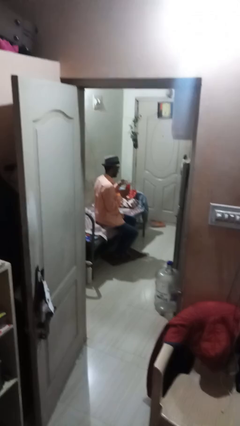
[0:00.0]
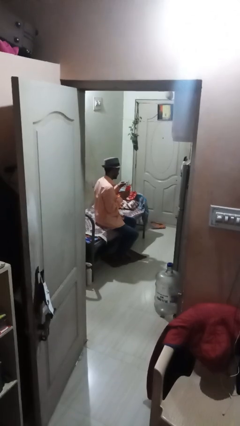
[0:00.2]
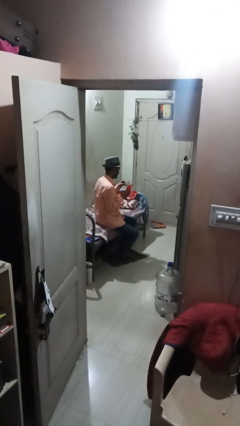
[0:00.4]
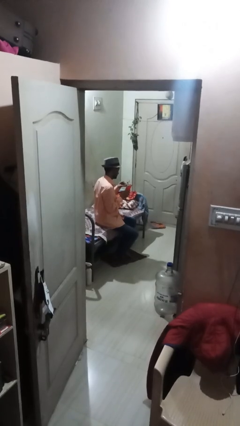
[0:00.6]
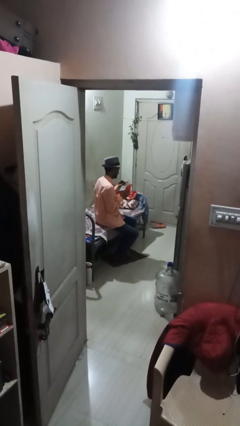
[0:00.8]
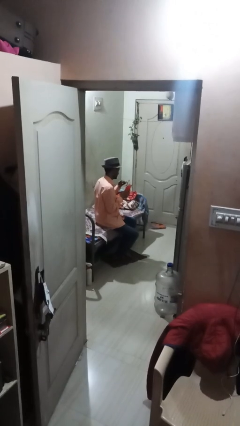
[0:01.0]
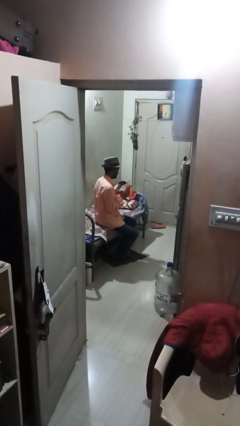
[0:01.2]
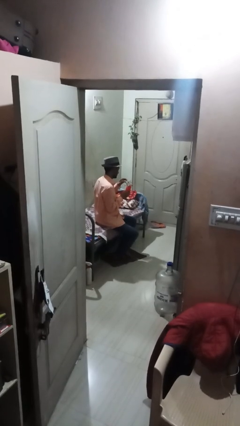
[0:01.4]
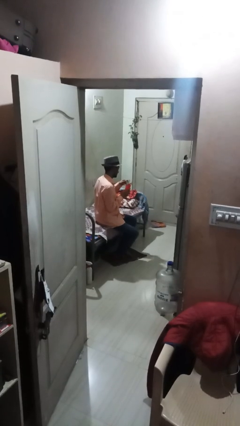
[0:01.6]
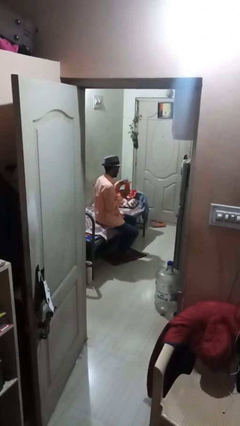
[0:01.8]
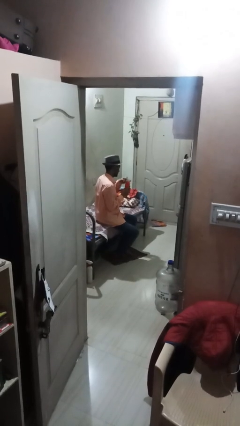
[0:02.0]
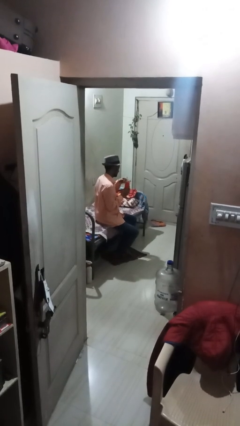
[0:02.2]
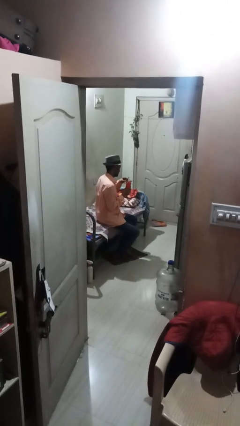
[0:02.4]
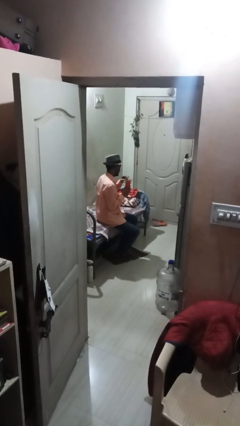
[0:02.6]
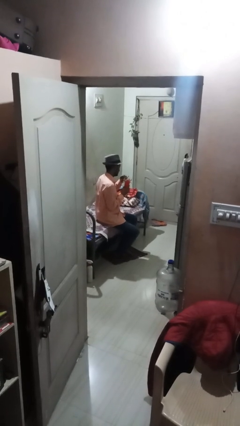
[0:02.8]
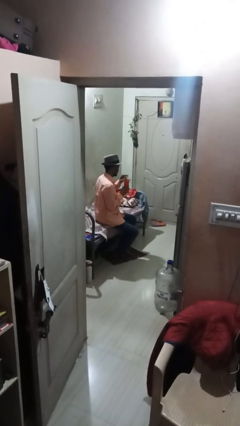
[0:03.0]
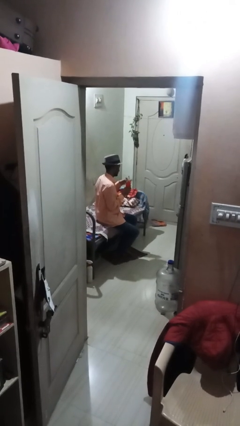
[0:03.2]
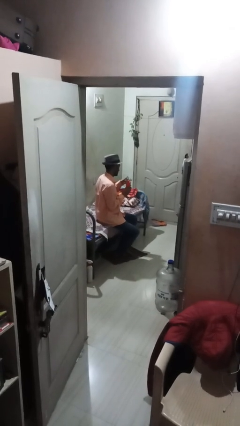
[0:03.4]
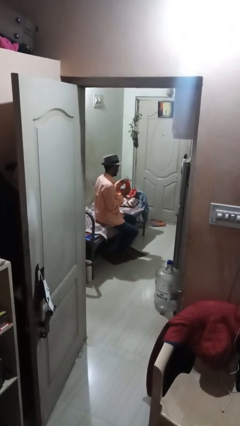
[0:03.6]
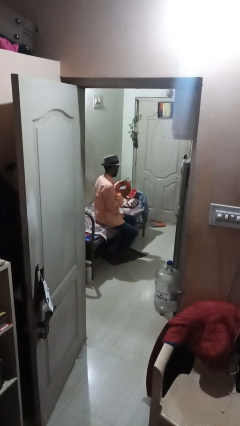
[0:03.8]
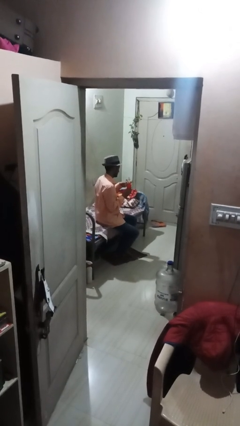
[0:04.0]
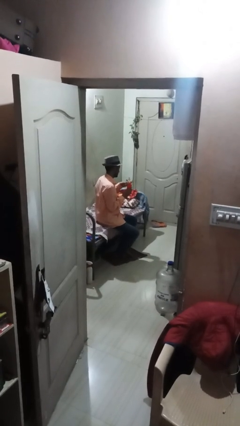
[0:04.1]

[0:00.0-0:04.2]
person arranges flowers in vase

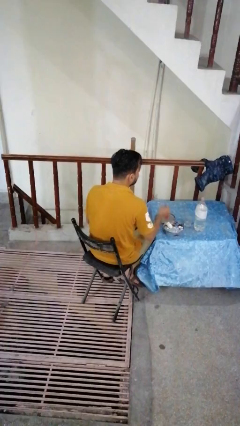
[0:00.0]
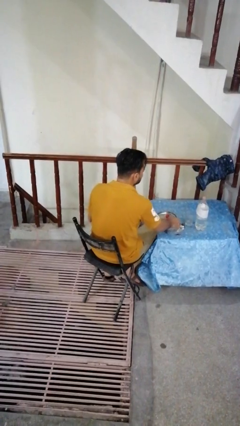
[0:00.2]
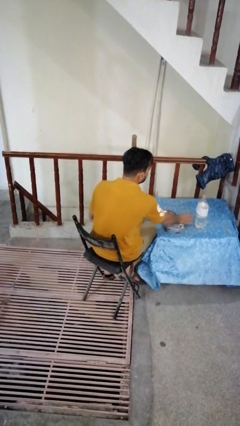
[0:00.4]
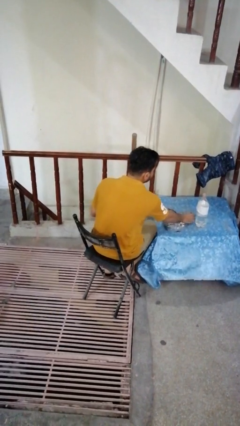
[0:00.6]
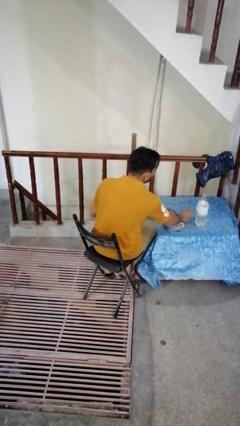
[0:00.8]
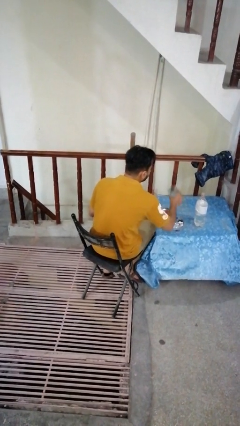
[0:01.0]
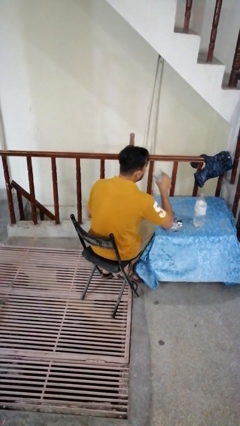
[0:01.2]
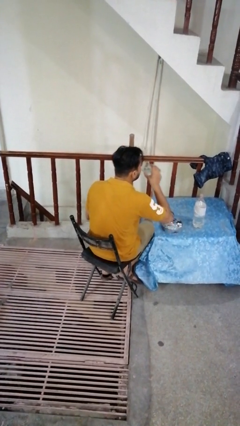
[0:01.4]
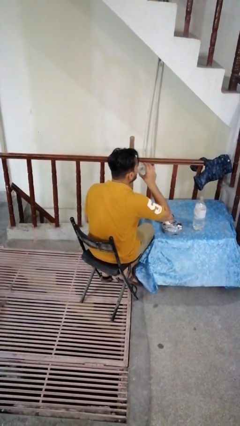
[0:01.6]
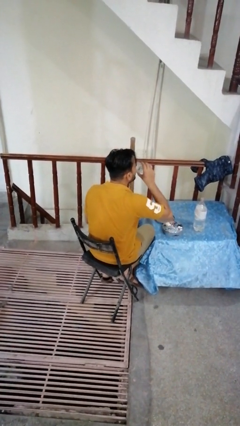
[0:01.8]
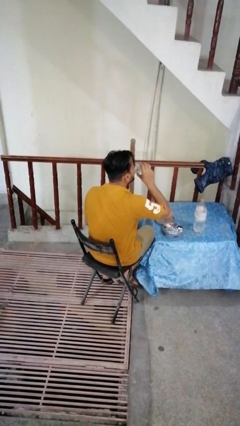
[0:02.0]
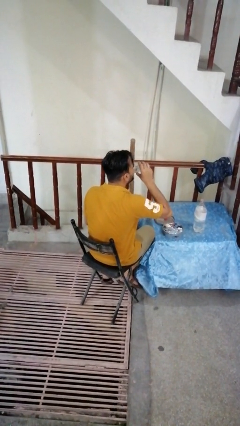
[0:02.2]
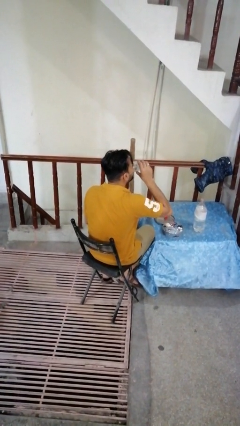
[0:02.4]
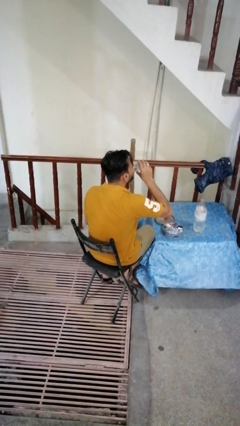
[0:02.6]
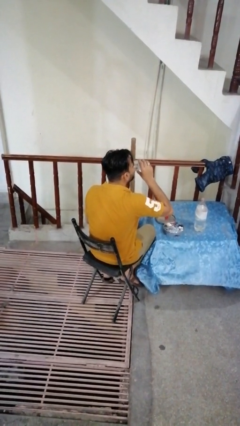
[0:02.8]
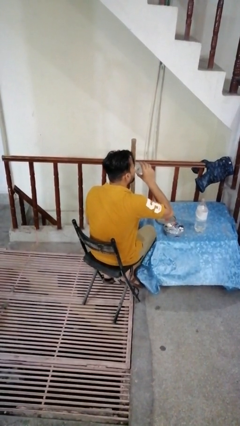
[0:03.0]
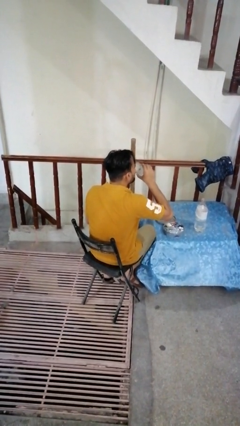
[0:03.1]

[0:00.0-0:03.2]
person drinks from cup

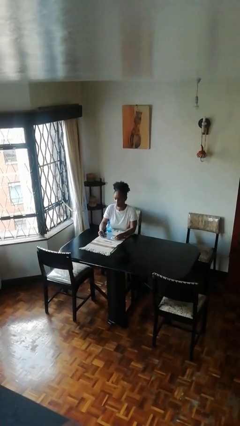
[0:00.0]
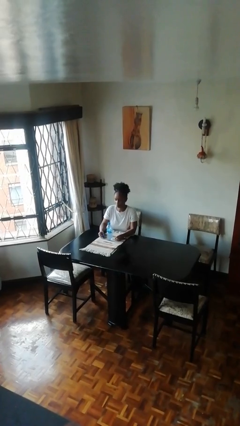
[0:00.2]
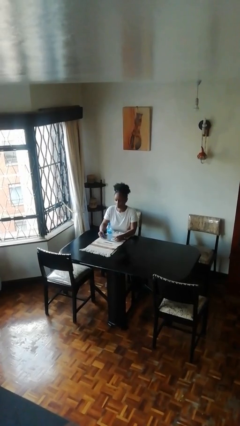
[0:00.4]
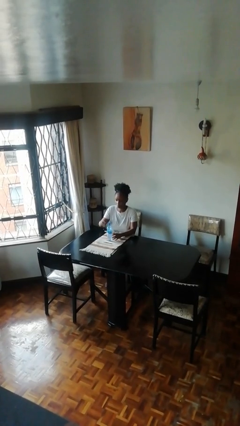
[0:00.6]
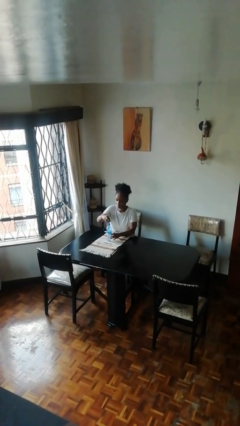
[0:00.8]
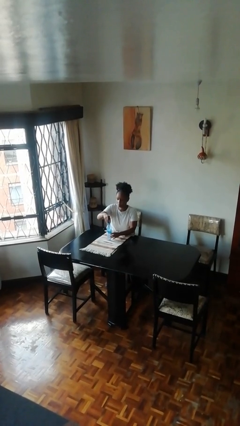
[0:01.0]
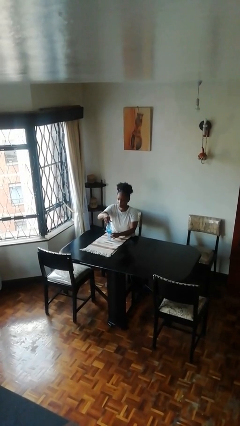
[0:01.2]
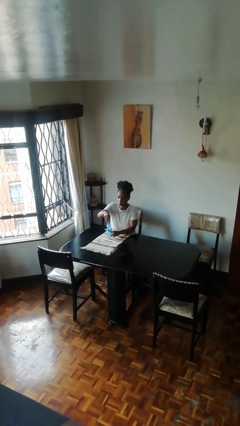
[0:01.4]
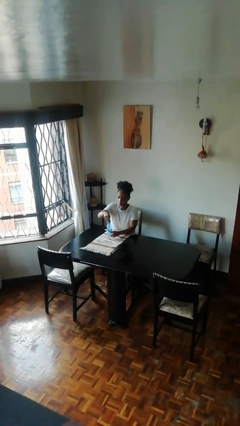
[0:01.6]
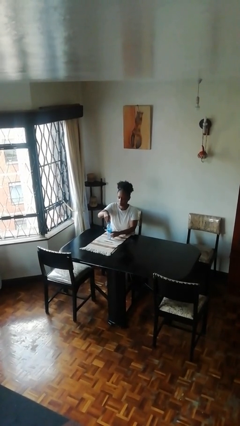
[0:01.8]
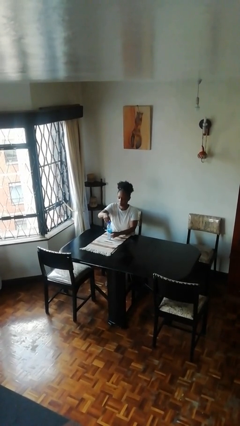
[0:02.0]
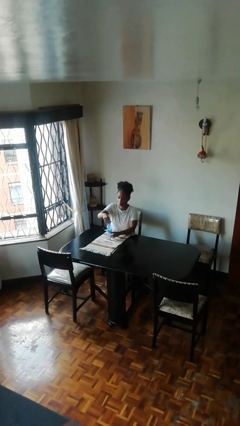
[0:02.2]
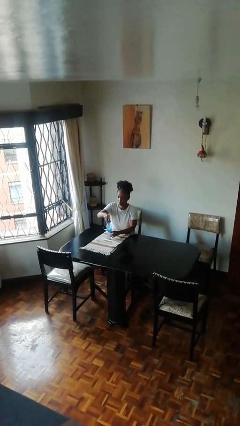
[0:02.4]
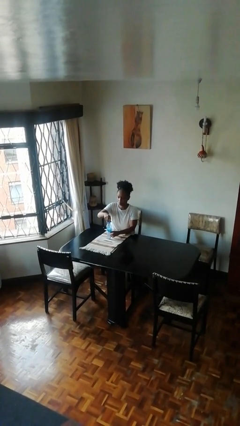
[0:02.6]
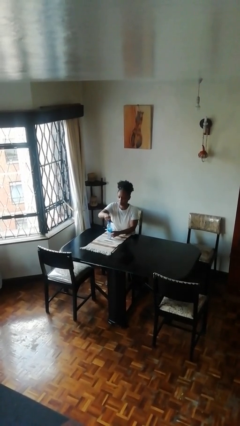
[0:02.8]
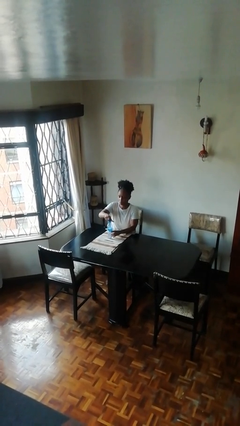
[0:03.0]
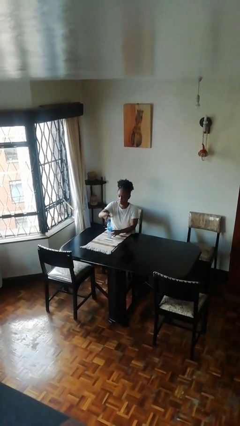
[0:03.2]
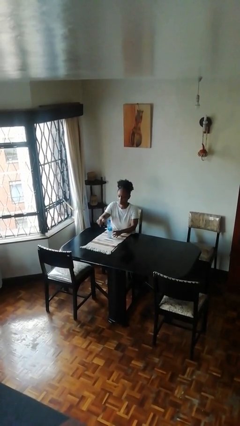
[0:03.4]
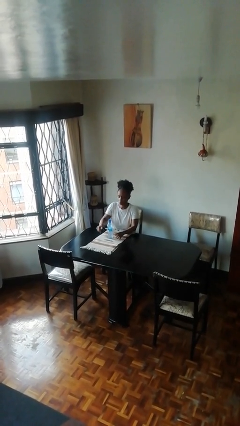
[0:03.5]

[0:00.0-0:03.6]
person screws lid to bottle

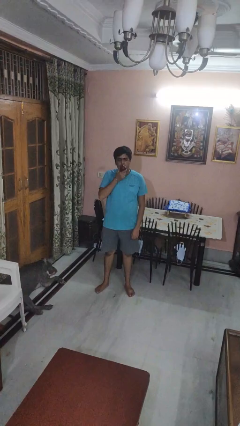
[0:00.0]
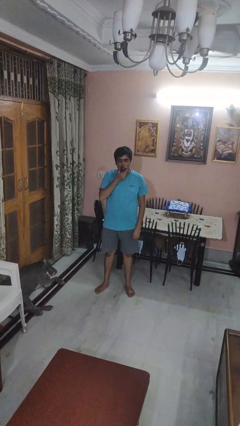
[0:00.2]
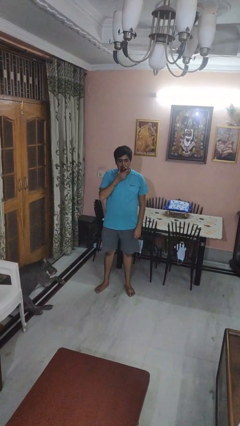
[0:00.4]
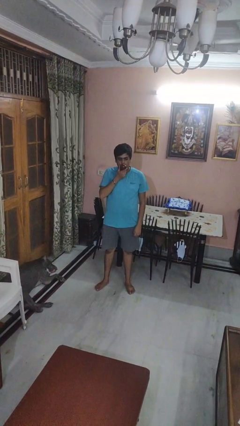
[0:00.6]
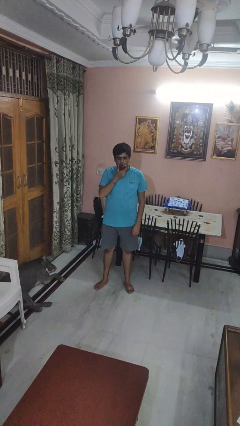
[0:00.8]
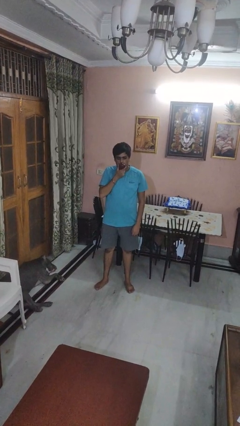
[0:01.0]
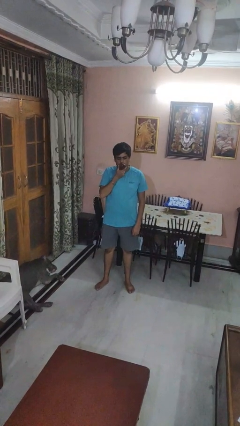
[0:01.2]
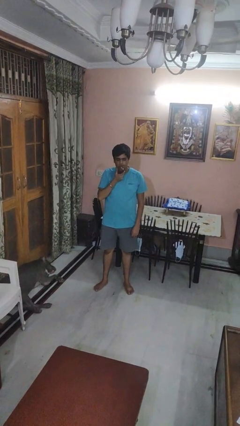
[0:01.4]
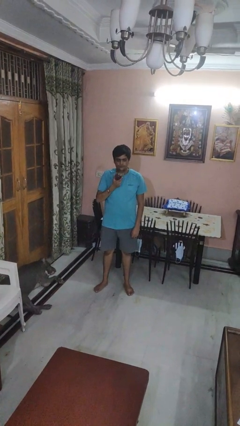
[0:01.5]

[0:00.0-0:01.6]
person eats apple

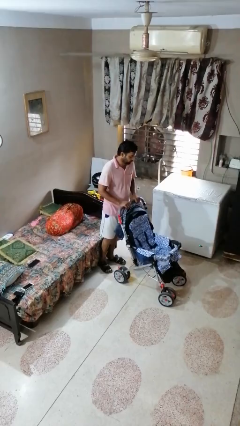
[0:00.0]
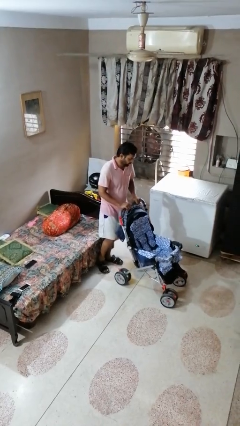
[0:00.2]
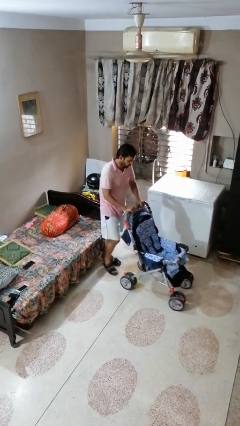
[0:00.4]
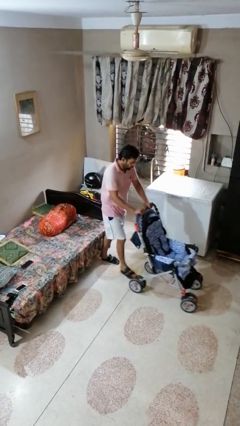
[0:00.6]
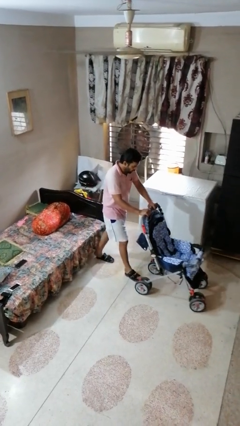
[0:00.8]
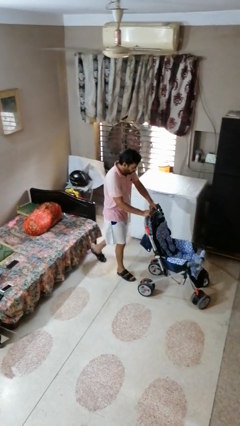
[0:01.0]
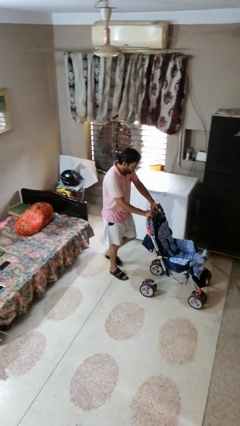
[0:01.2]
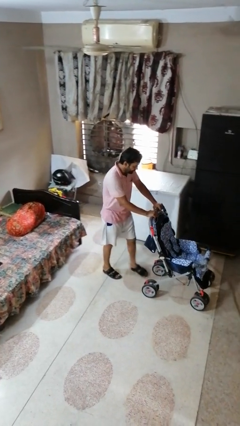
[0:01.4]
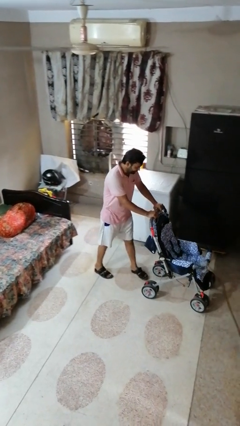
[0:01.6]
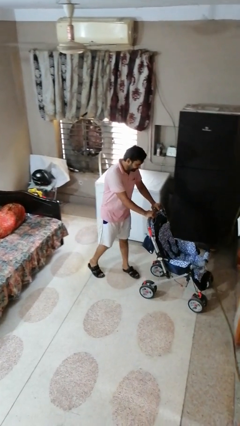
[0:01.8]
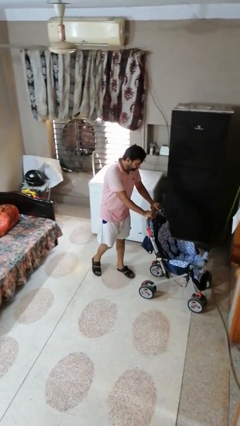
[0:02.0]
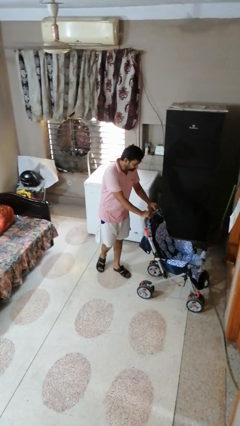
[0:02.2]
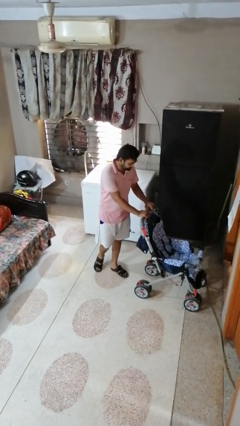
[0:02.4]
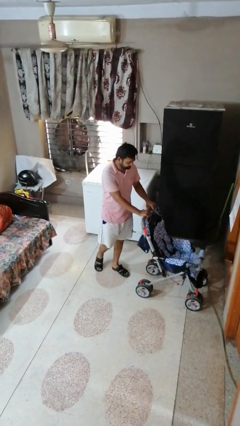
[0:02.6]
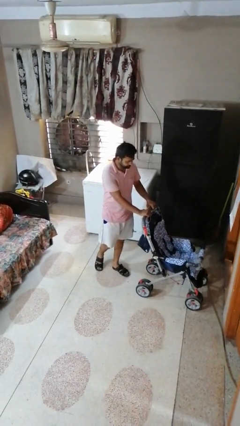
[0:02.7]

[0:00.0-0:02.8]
person pushes wheeled cart

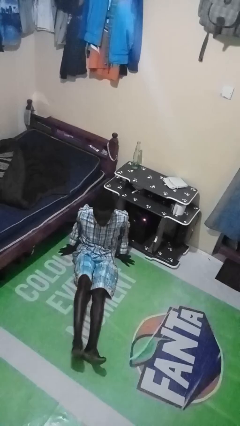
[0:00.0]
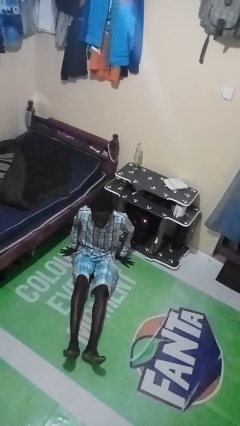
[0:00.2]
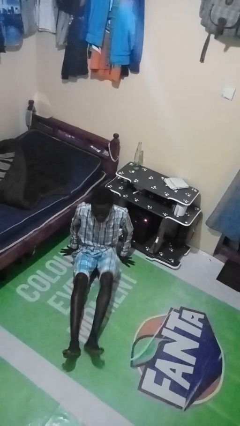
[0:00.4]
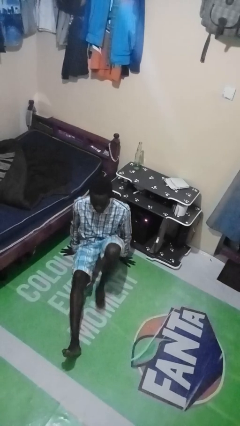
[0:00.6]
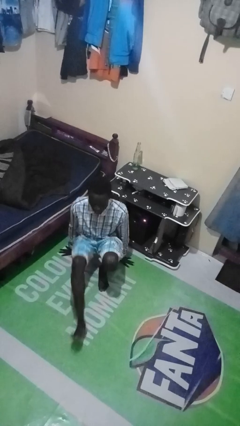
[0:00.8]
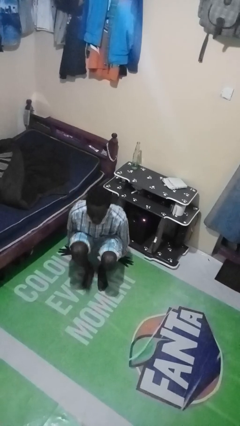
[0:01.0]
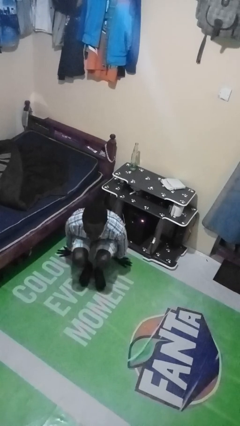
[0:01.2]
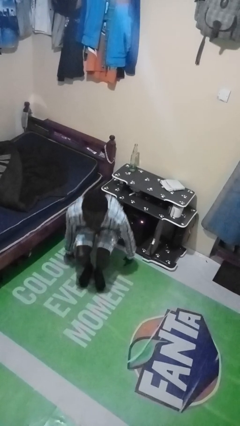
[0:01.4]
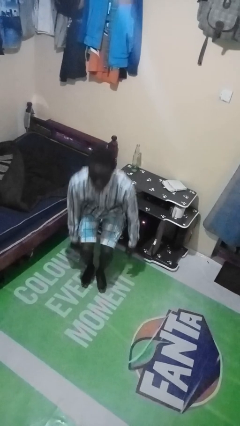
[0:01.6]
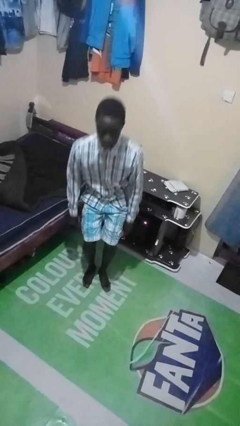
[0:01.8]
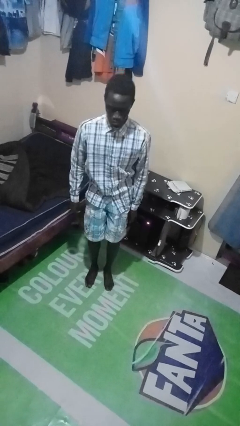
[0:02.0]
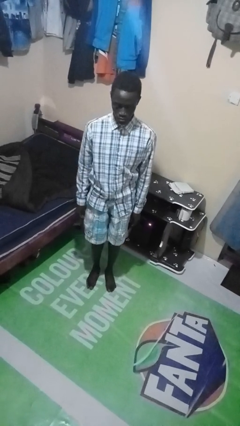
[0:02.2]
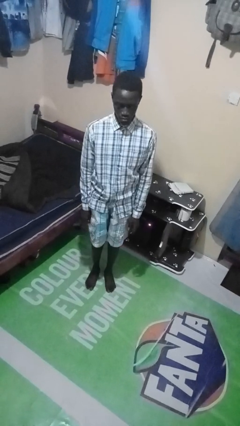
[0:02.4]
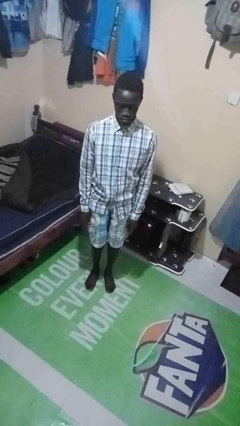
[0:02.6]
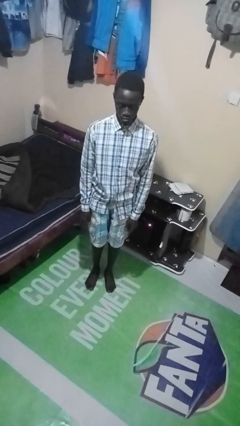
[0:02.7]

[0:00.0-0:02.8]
person stands up from floor
